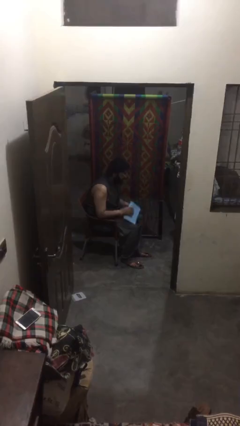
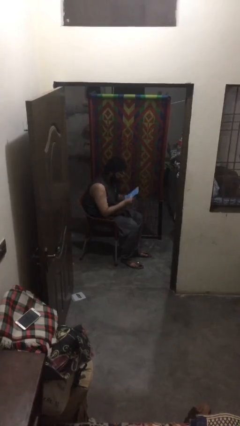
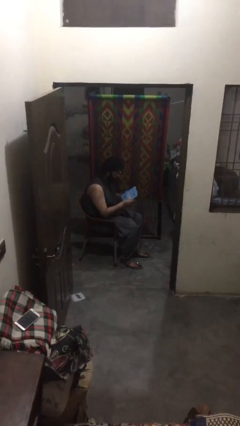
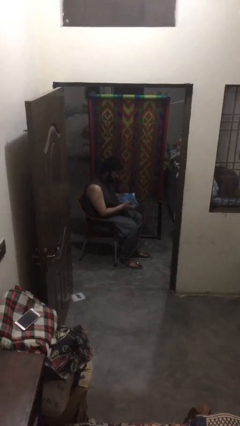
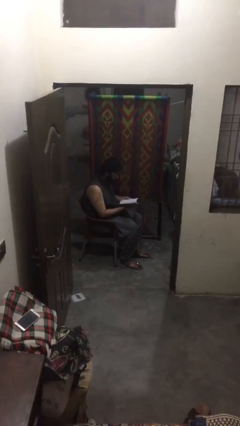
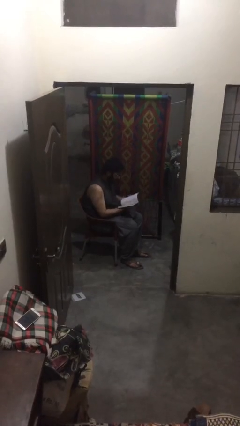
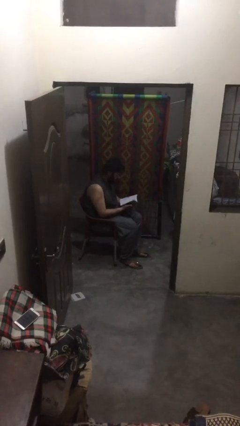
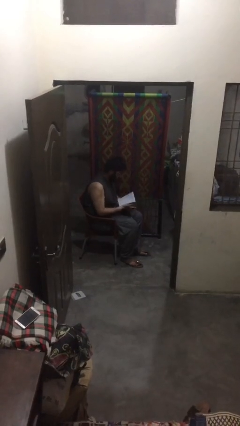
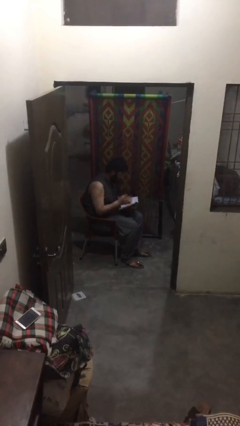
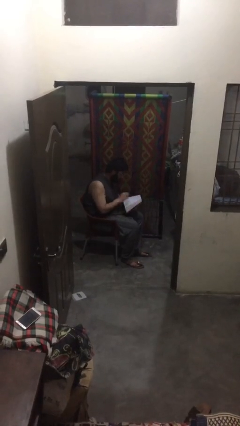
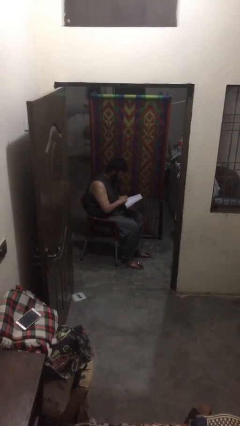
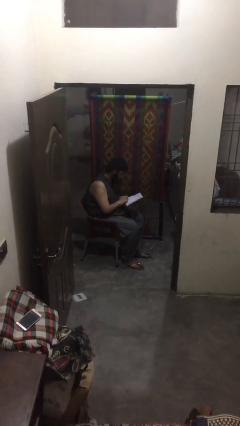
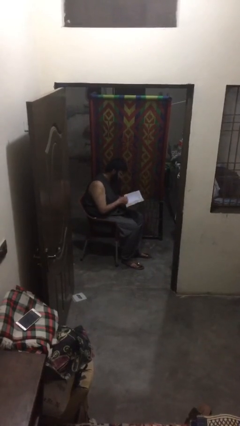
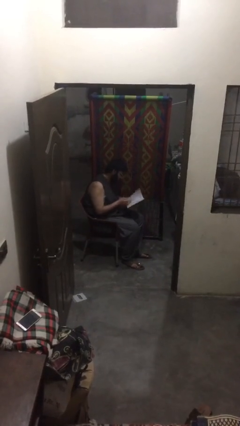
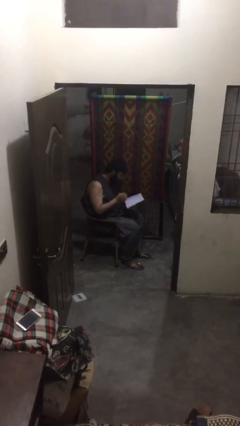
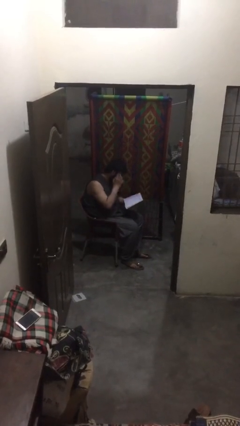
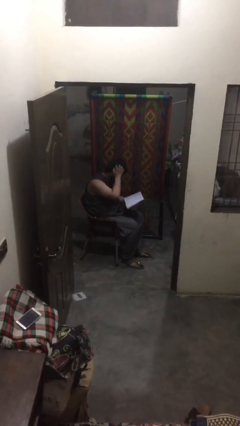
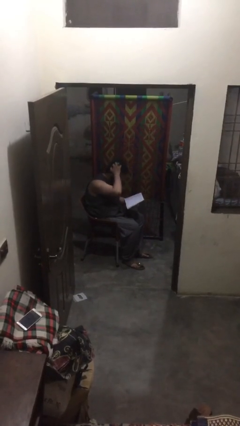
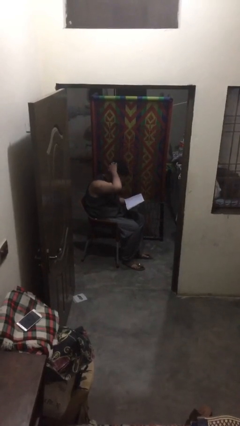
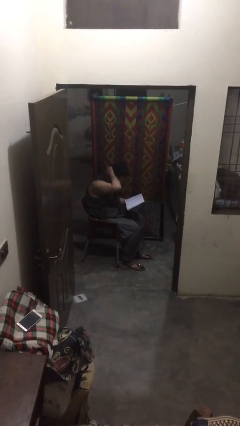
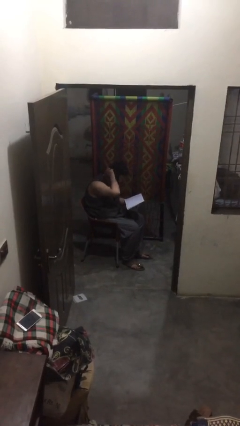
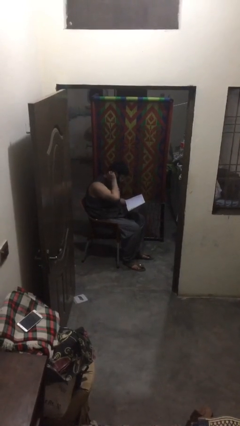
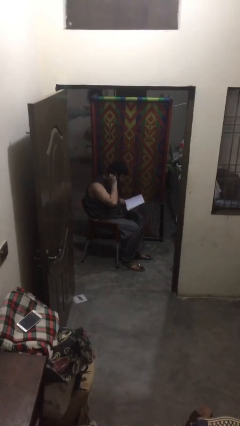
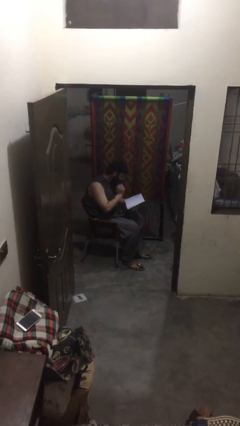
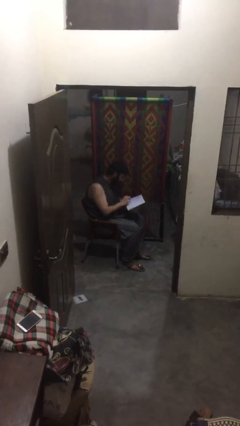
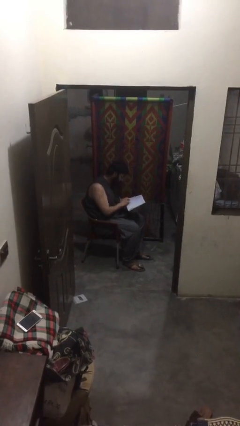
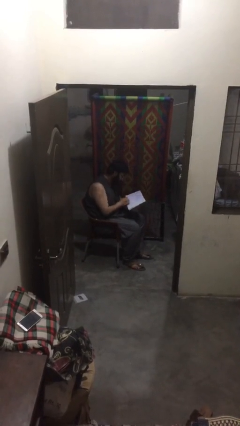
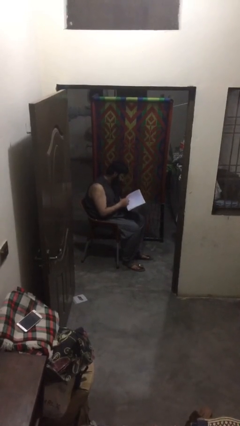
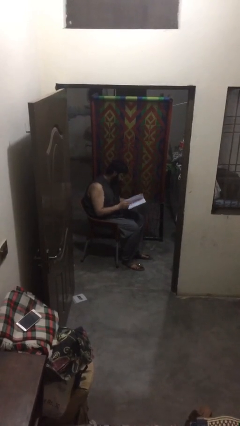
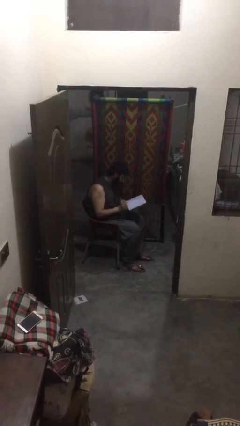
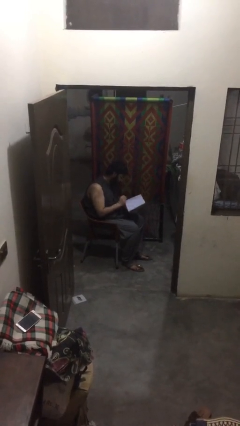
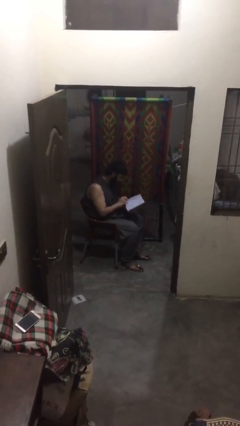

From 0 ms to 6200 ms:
person reads document

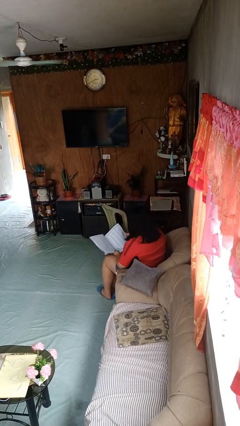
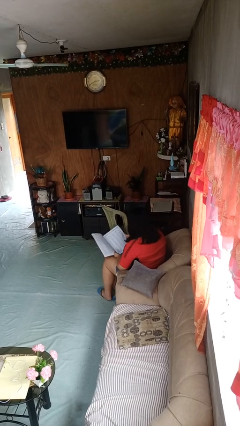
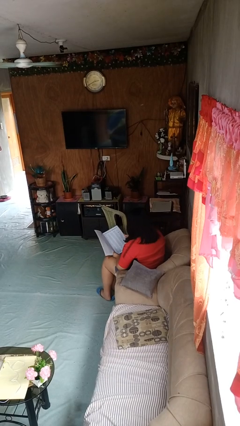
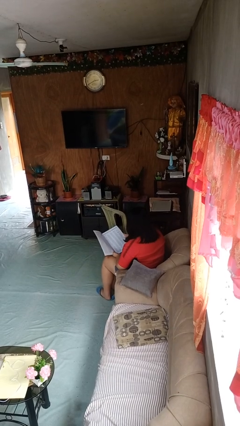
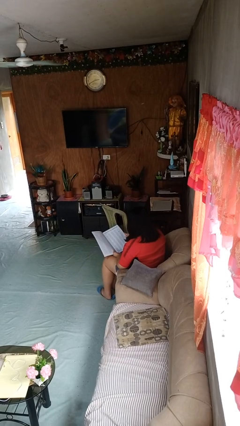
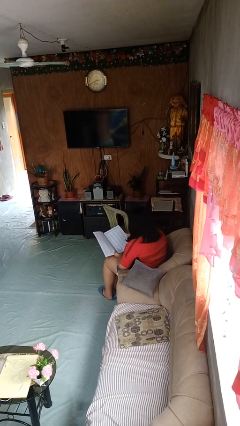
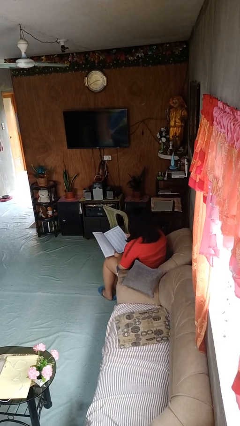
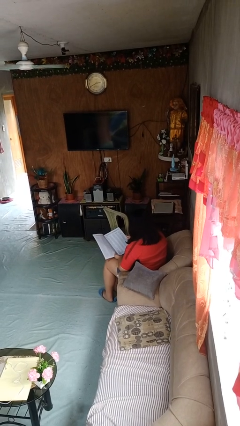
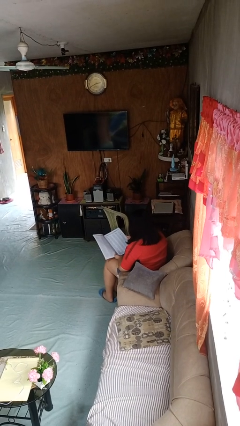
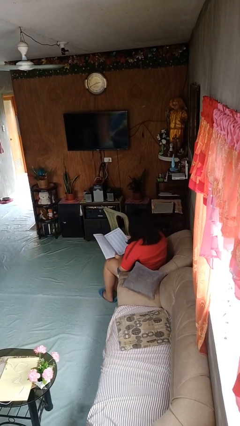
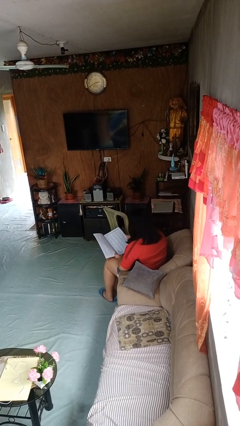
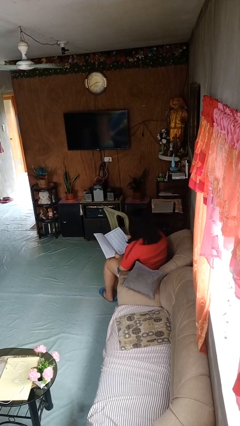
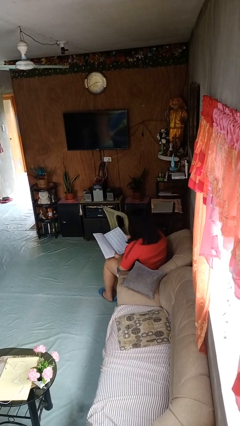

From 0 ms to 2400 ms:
person reads magazine

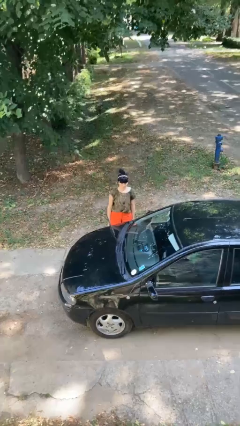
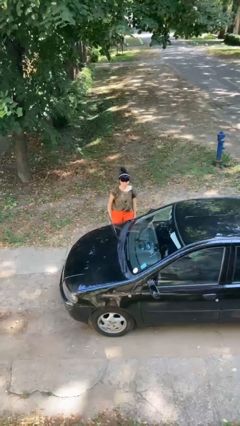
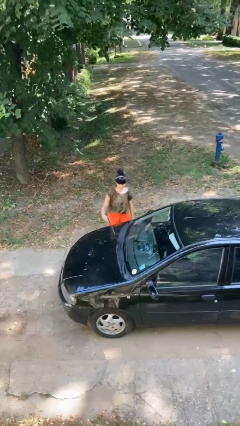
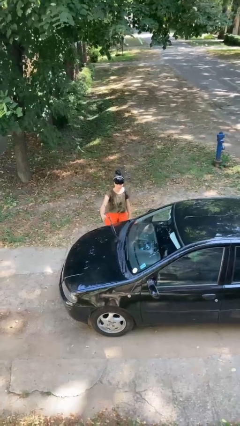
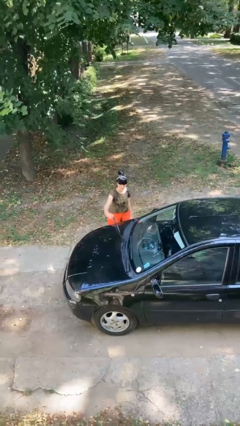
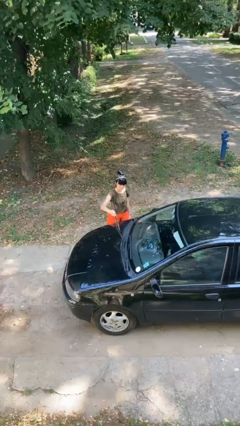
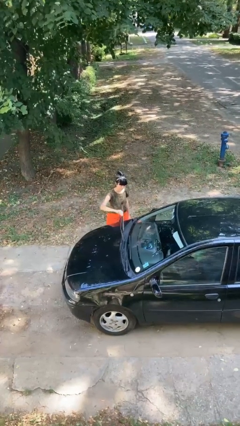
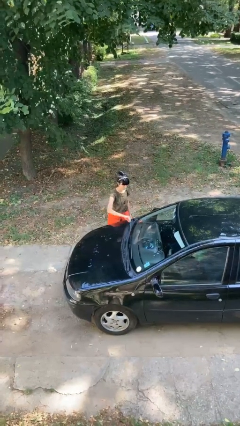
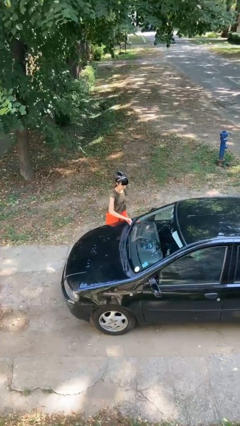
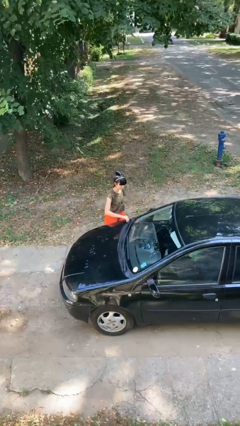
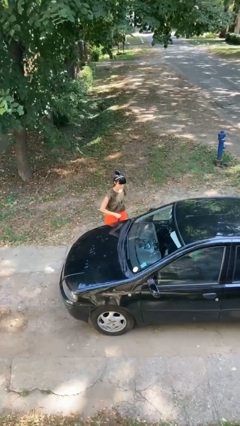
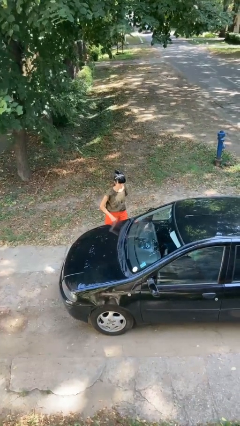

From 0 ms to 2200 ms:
person flips down car wipers

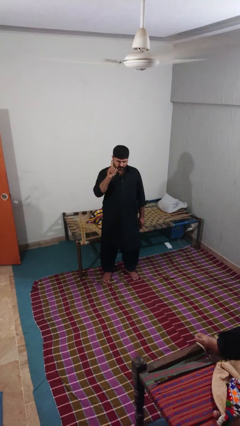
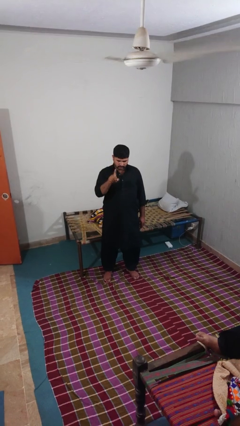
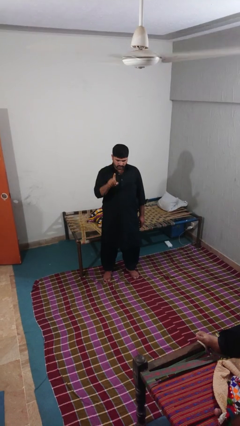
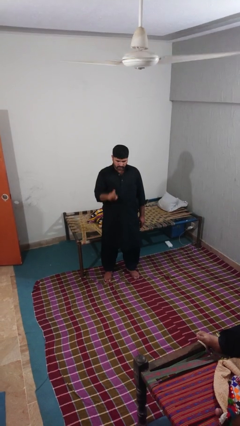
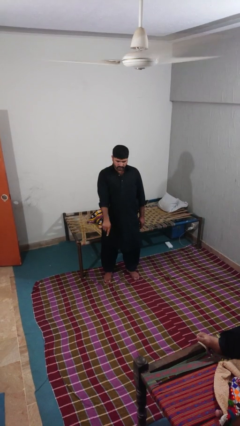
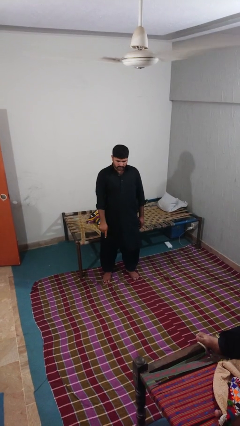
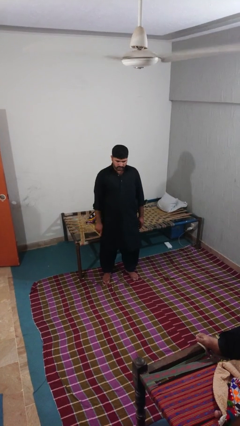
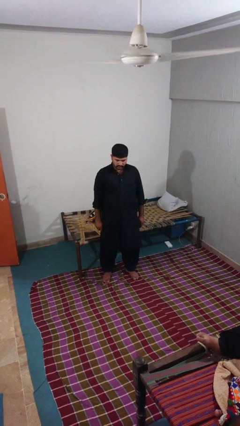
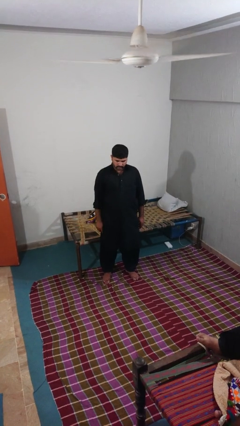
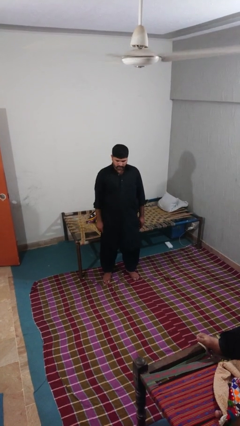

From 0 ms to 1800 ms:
person gestures swipe down

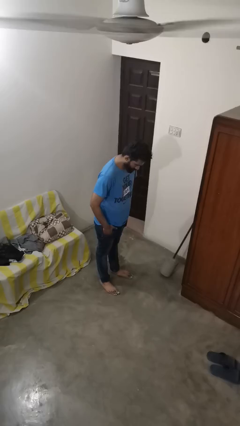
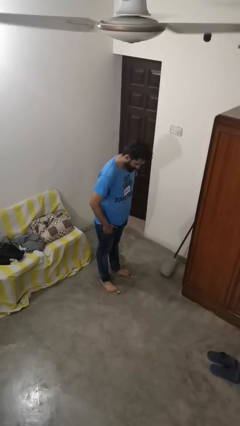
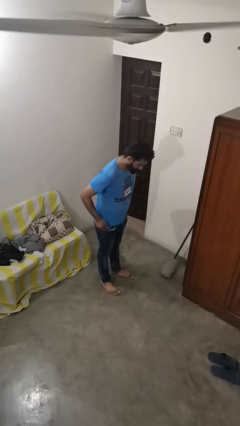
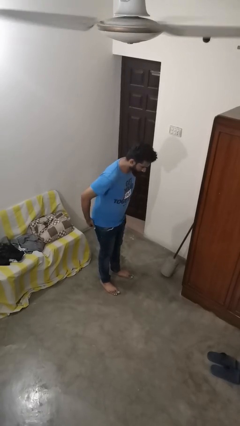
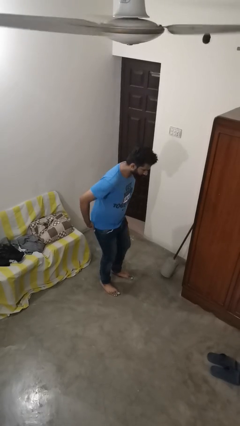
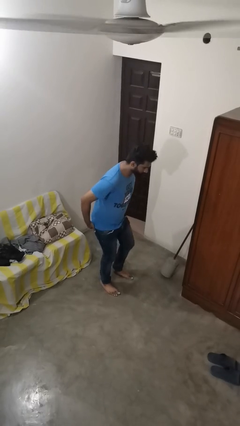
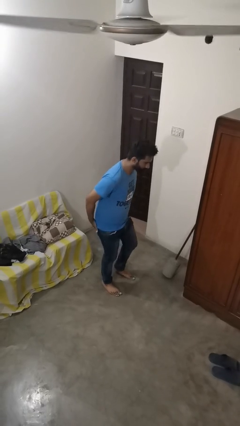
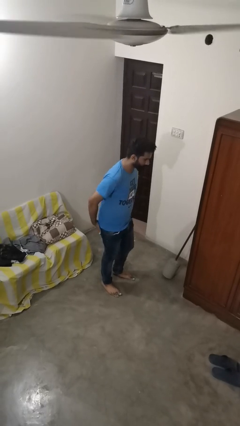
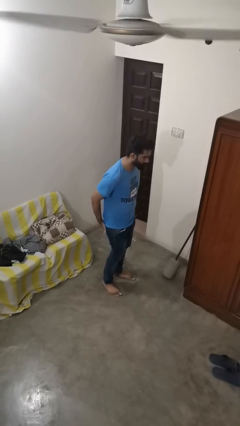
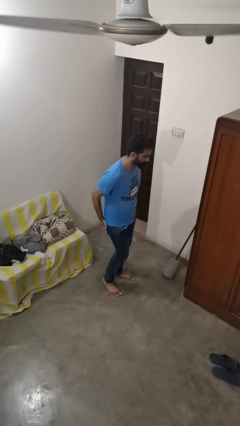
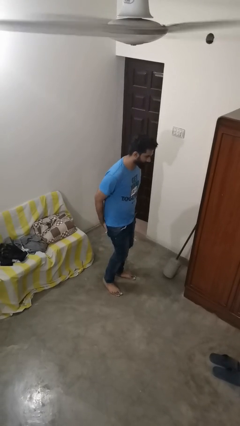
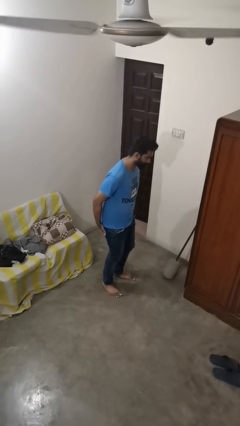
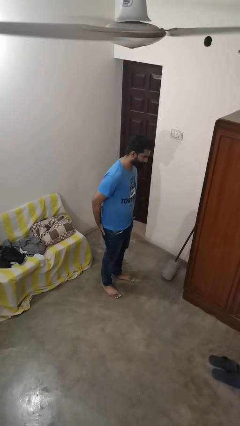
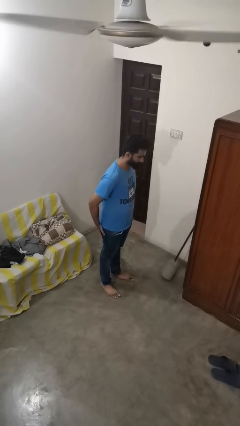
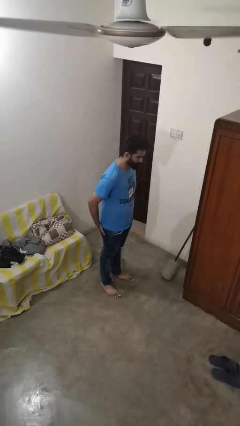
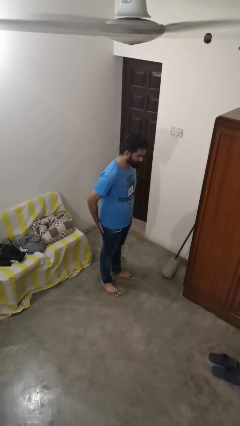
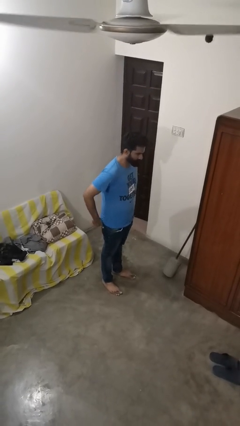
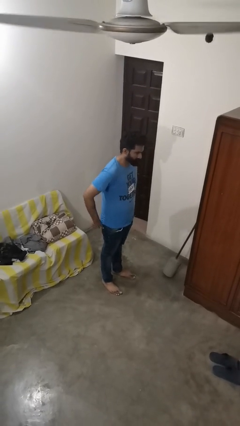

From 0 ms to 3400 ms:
person puts hands in back pockets

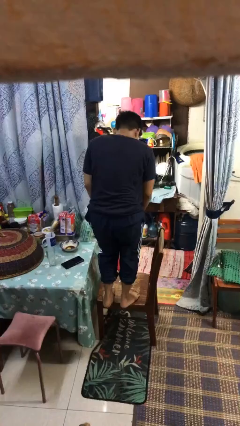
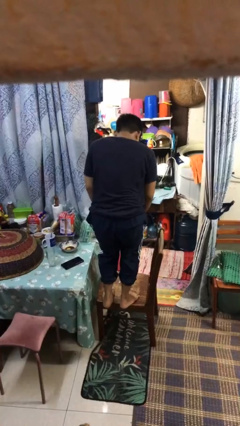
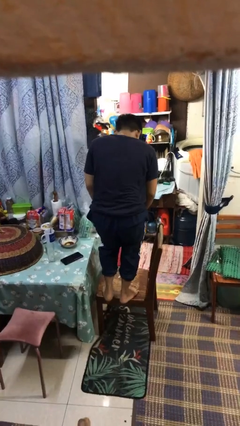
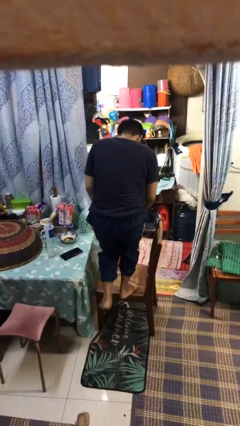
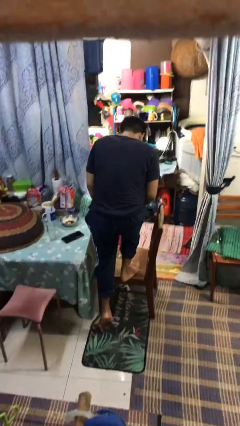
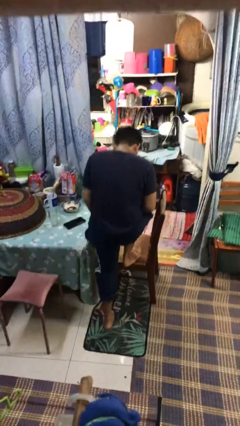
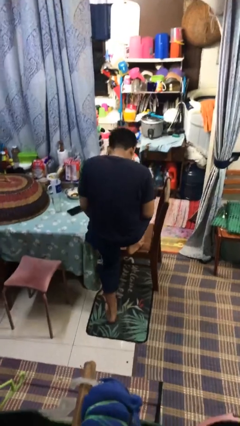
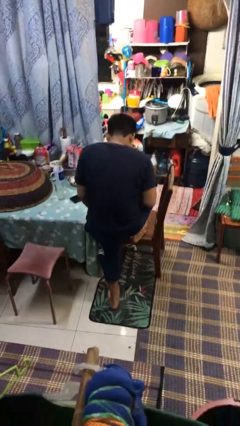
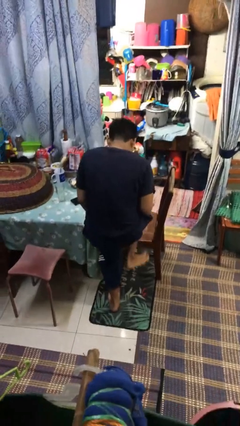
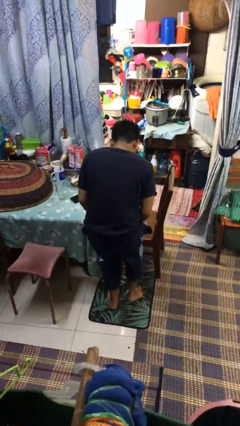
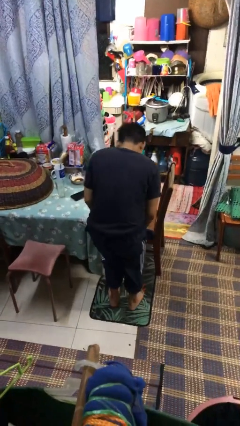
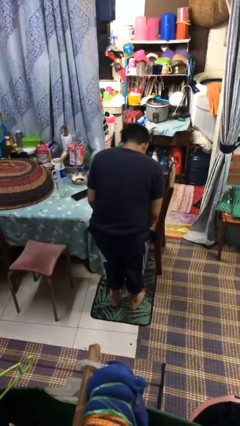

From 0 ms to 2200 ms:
person climbs off chair
